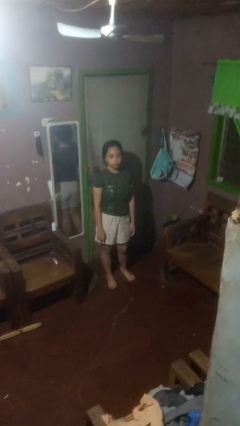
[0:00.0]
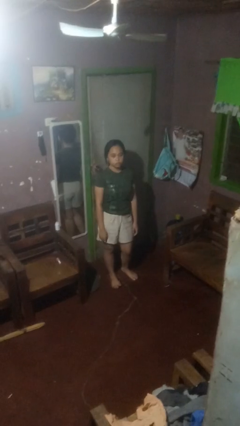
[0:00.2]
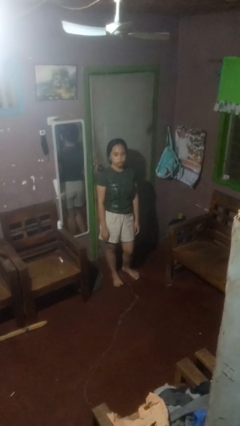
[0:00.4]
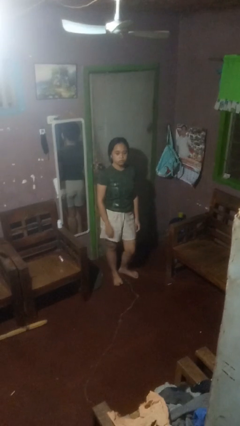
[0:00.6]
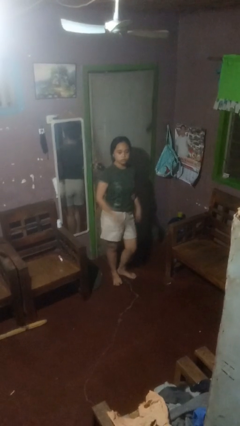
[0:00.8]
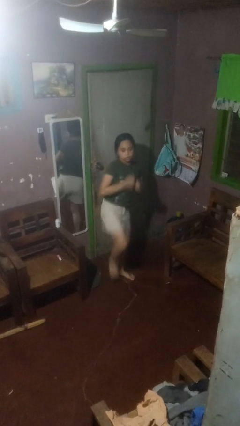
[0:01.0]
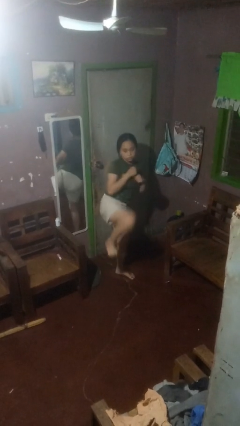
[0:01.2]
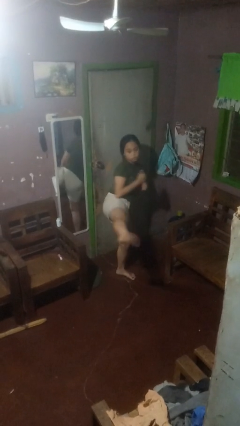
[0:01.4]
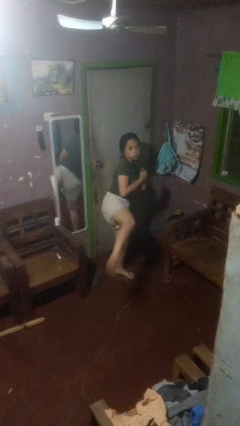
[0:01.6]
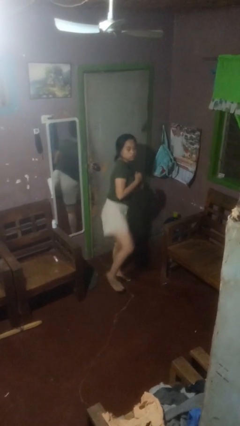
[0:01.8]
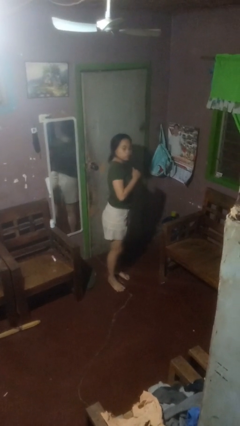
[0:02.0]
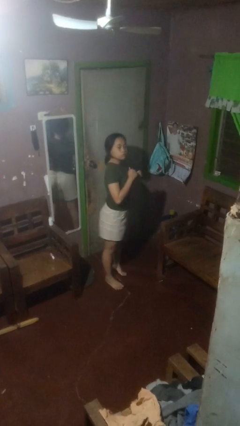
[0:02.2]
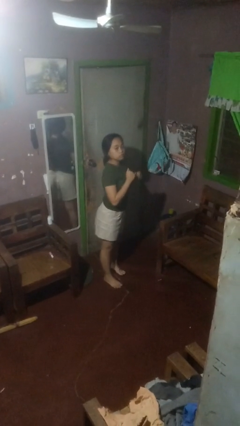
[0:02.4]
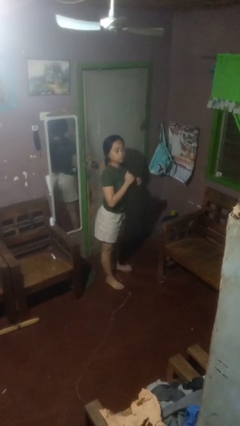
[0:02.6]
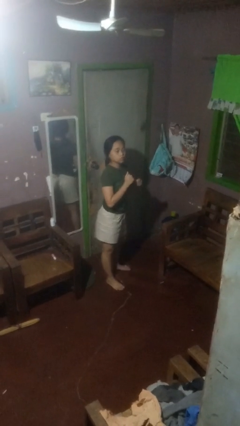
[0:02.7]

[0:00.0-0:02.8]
person karate kicks

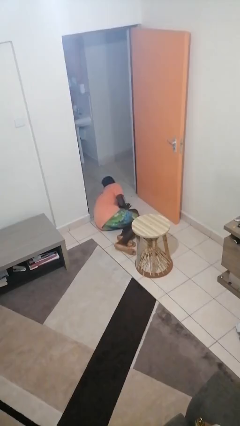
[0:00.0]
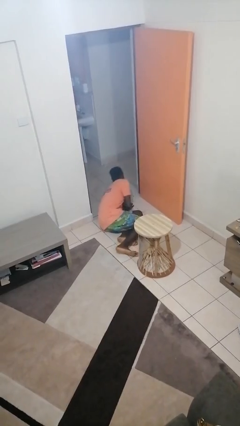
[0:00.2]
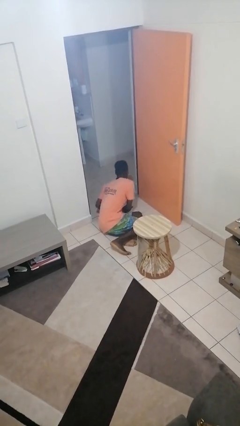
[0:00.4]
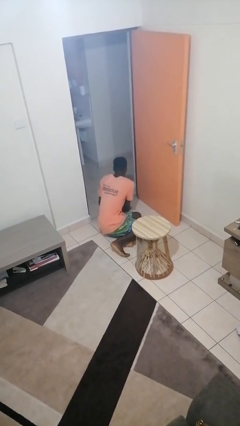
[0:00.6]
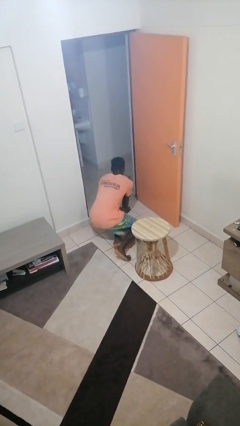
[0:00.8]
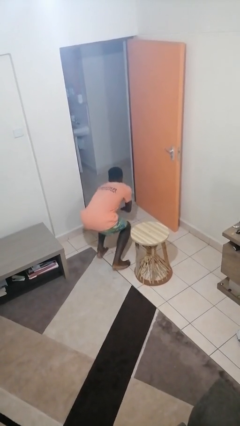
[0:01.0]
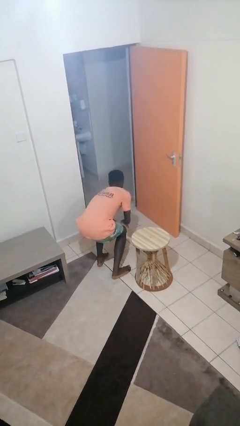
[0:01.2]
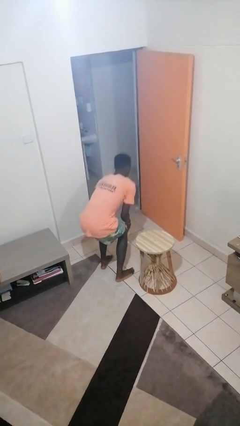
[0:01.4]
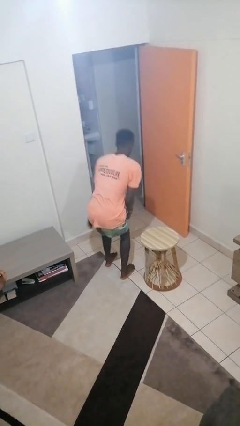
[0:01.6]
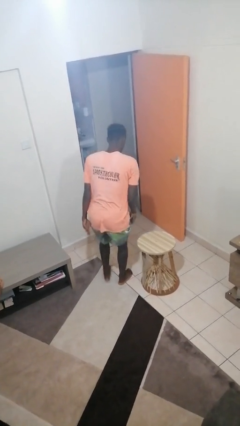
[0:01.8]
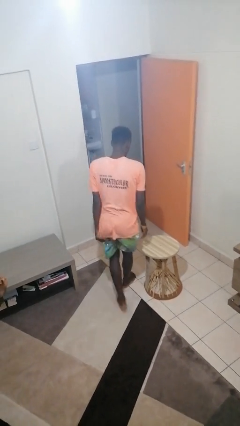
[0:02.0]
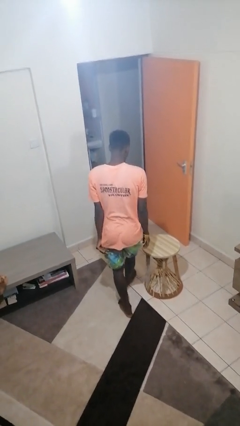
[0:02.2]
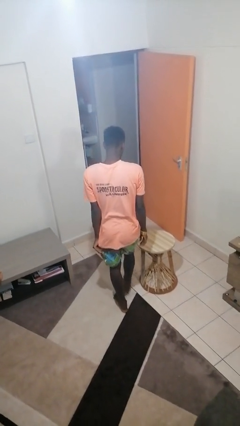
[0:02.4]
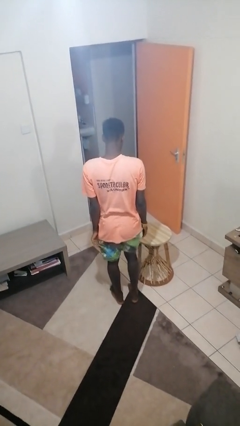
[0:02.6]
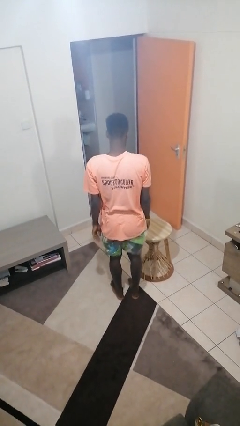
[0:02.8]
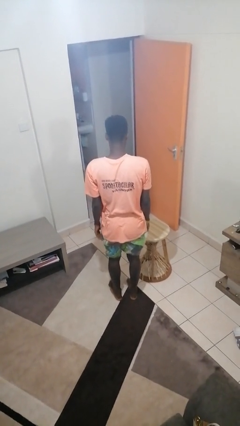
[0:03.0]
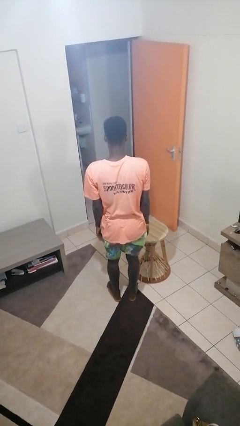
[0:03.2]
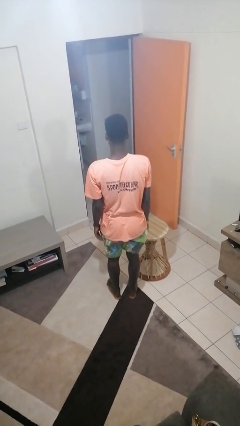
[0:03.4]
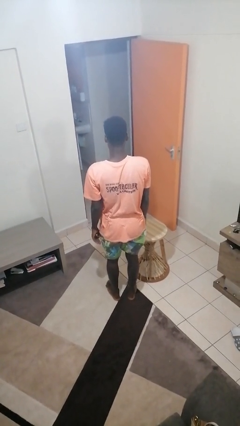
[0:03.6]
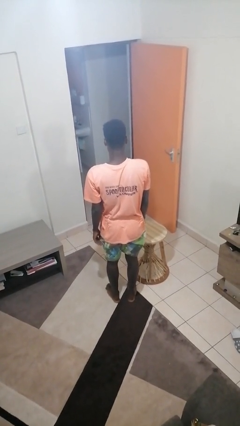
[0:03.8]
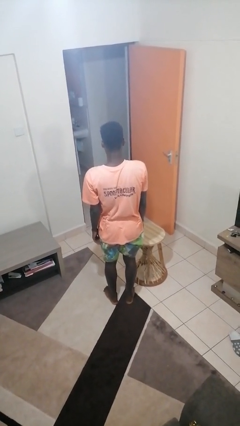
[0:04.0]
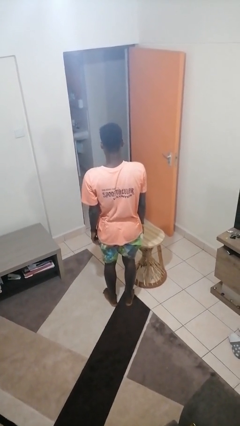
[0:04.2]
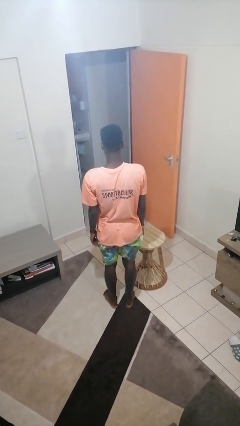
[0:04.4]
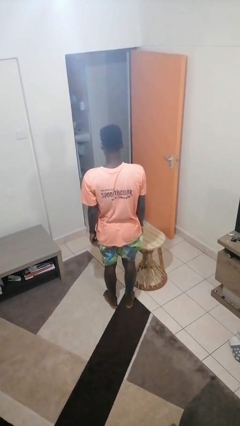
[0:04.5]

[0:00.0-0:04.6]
person stands up from floor

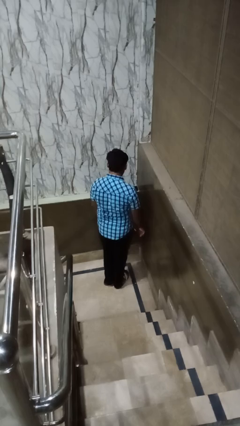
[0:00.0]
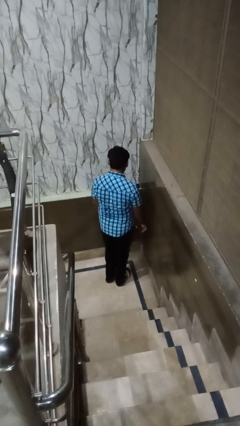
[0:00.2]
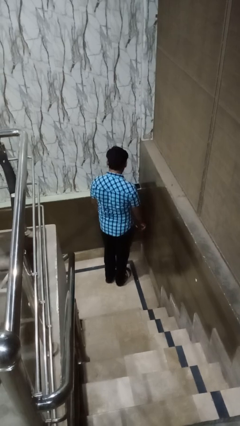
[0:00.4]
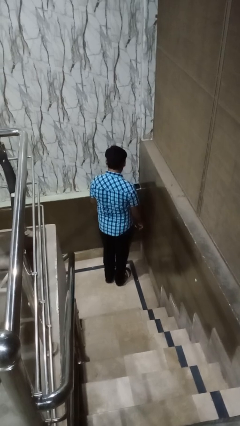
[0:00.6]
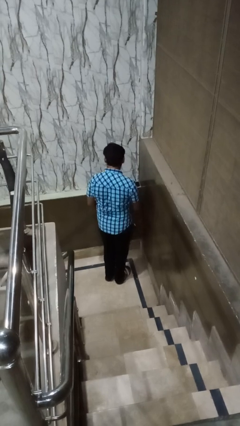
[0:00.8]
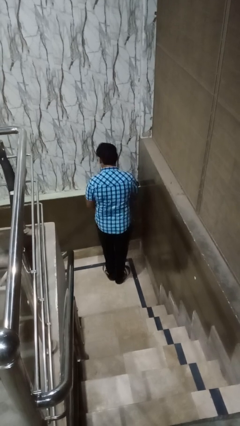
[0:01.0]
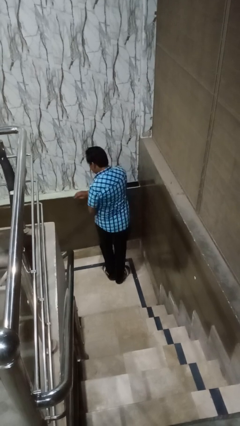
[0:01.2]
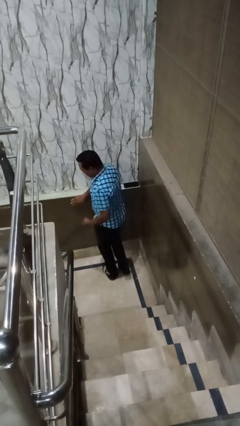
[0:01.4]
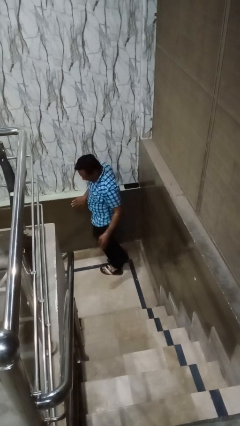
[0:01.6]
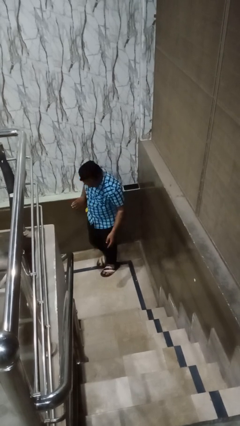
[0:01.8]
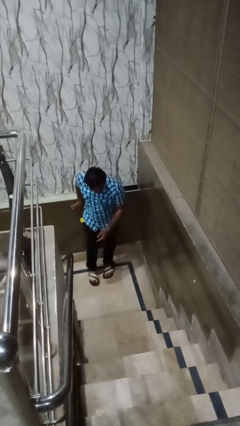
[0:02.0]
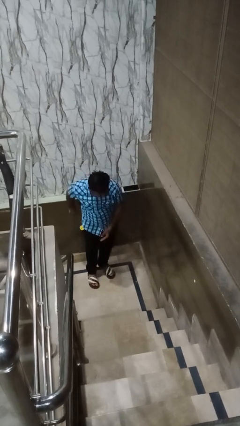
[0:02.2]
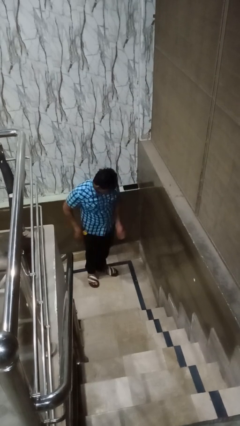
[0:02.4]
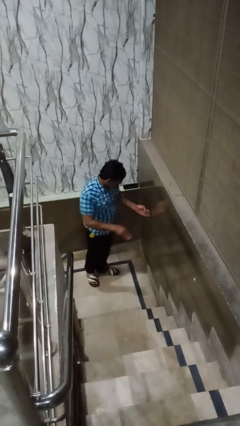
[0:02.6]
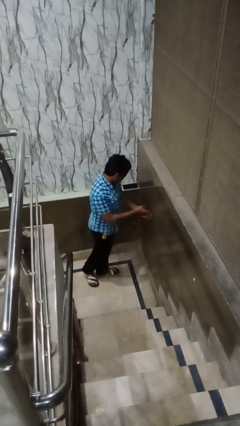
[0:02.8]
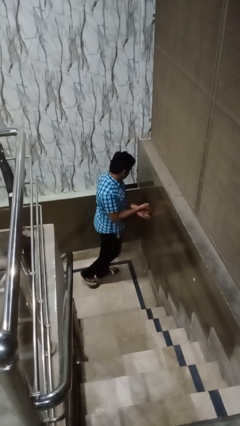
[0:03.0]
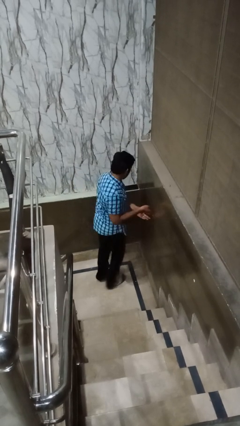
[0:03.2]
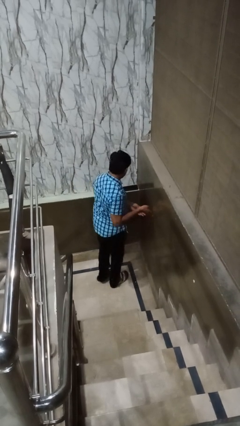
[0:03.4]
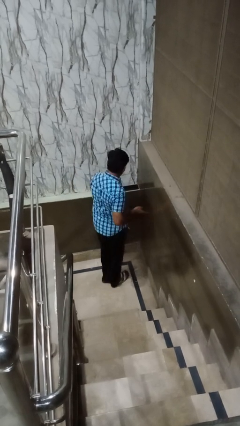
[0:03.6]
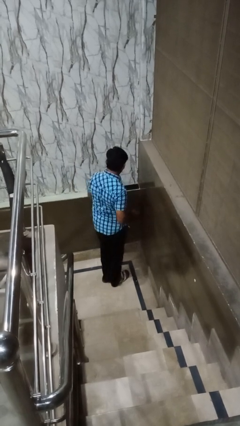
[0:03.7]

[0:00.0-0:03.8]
person twirls

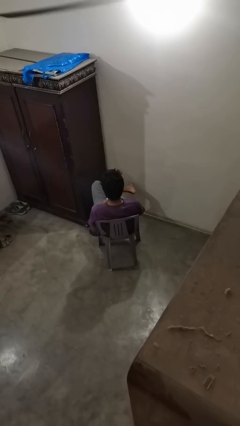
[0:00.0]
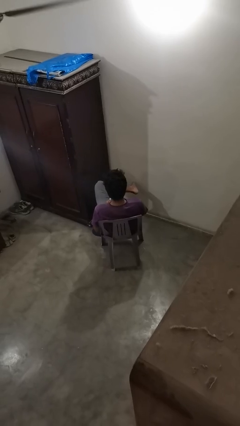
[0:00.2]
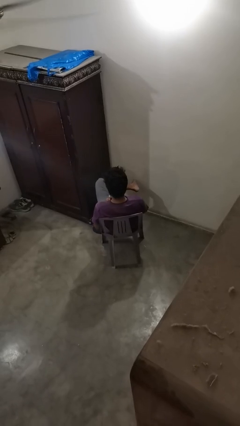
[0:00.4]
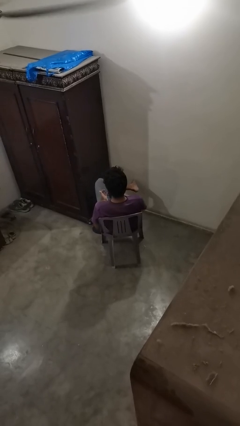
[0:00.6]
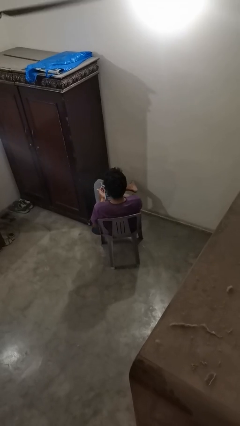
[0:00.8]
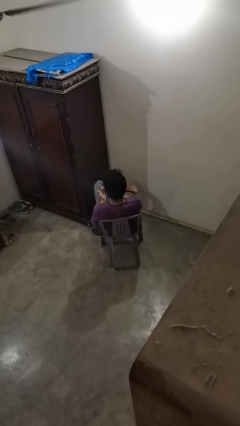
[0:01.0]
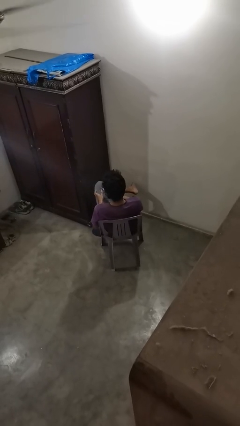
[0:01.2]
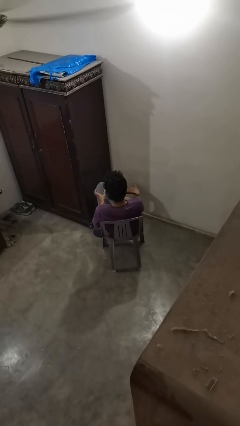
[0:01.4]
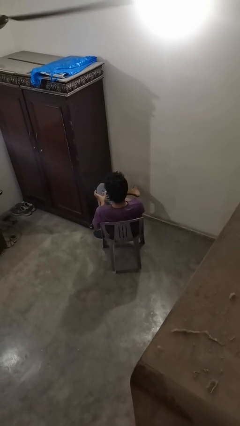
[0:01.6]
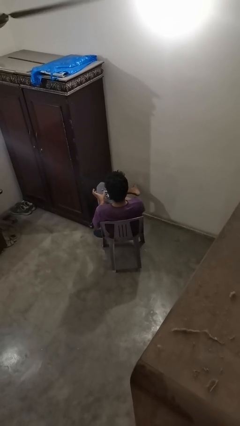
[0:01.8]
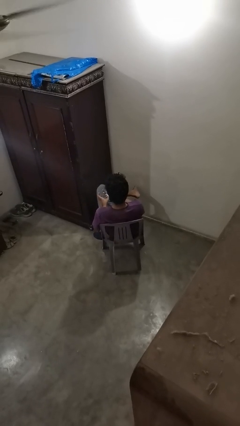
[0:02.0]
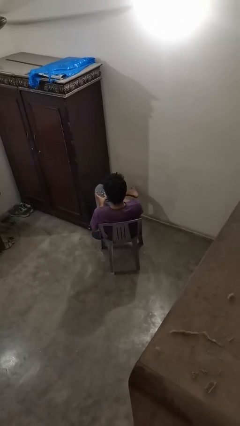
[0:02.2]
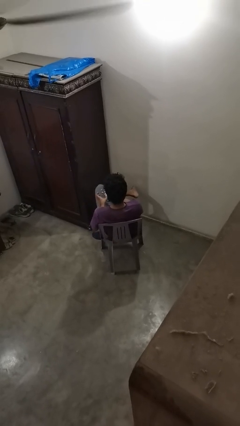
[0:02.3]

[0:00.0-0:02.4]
person files fingernails

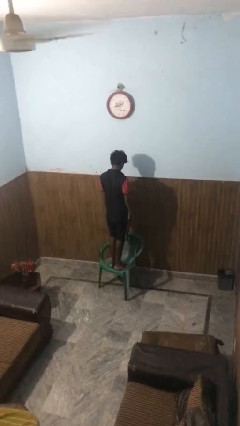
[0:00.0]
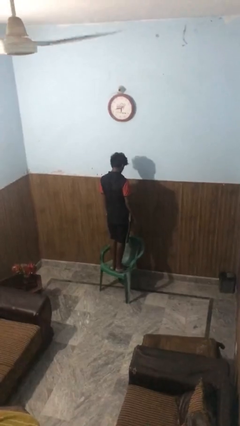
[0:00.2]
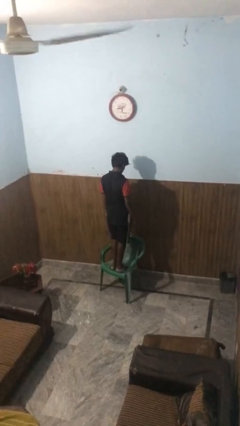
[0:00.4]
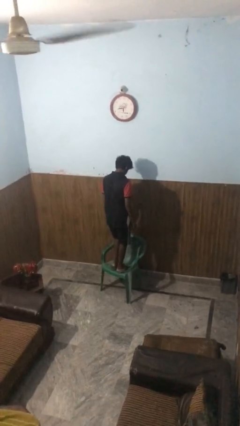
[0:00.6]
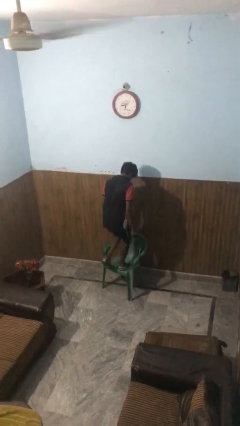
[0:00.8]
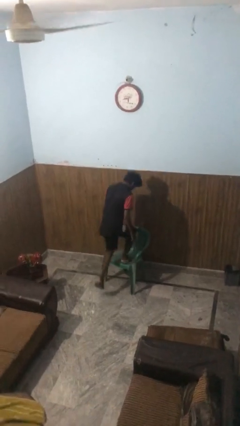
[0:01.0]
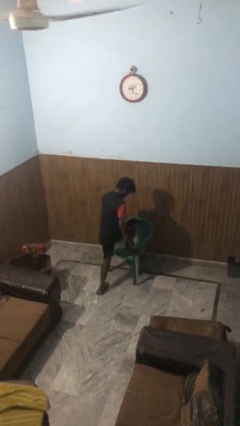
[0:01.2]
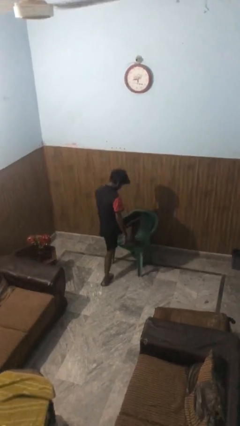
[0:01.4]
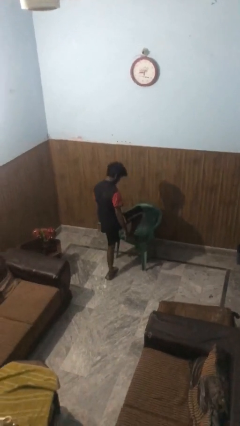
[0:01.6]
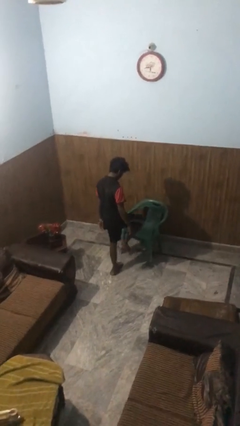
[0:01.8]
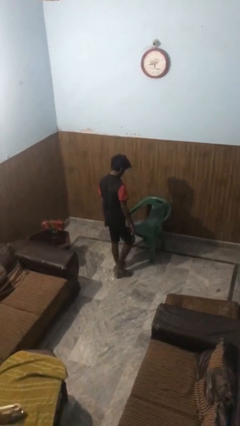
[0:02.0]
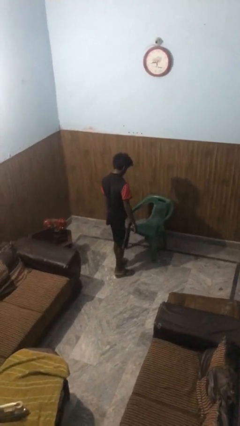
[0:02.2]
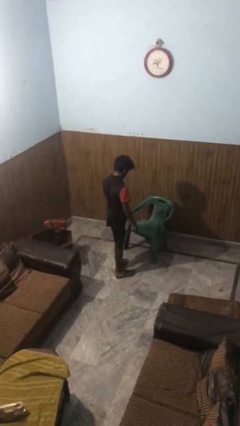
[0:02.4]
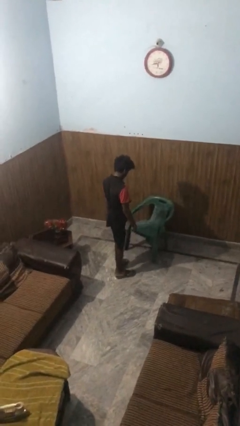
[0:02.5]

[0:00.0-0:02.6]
person climbs off chair

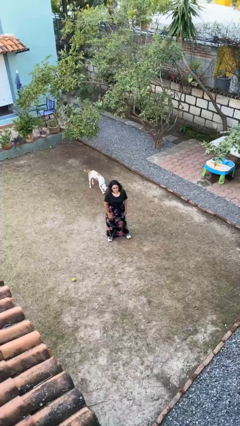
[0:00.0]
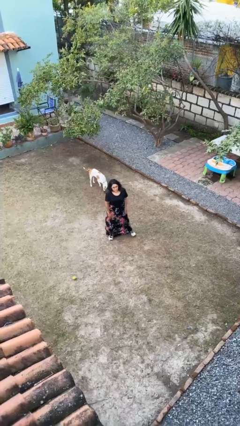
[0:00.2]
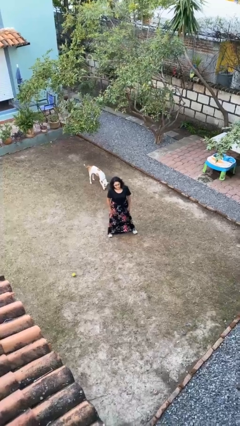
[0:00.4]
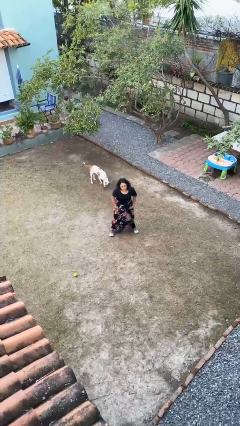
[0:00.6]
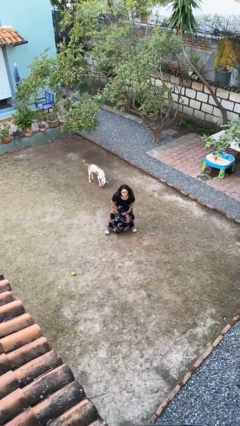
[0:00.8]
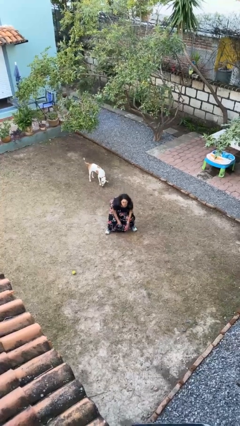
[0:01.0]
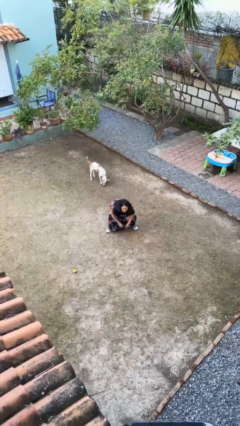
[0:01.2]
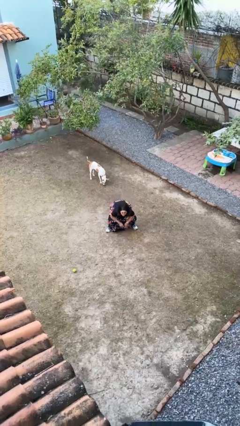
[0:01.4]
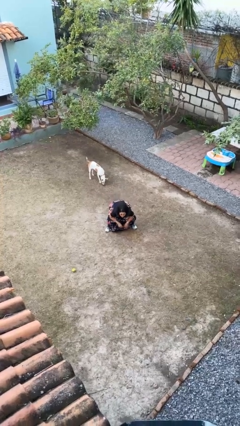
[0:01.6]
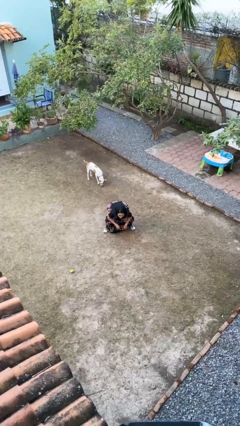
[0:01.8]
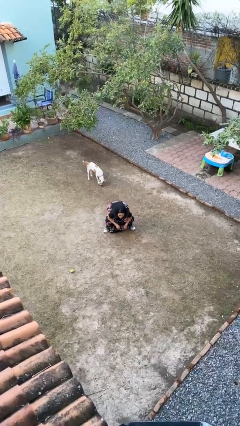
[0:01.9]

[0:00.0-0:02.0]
person squats
